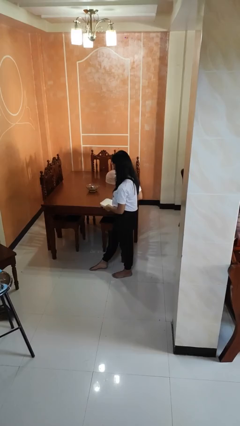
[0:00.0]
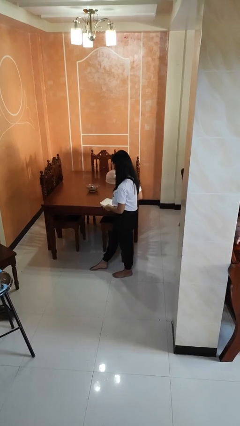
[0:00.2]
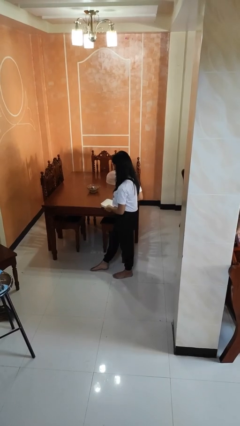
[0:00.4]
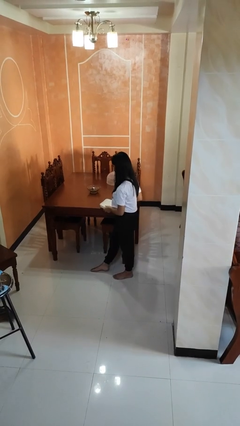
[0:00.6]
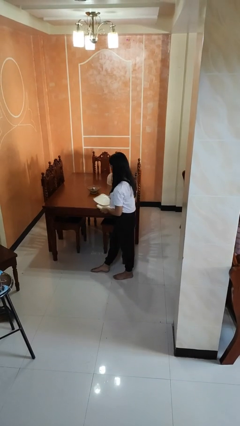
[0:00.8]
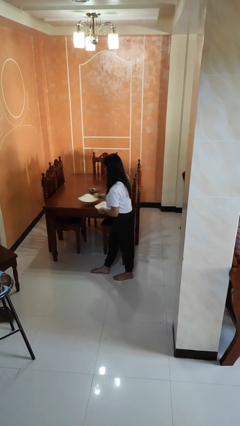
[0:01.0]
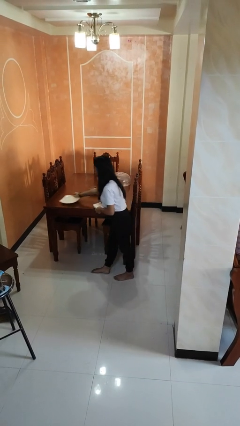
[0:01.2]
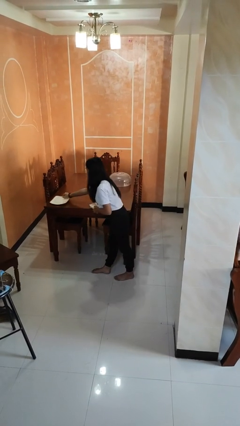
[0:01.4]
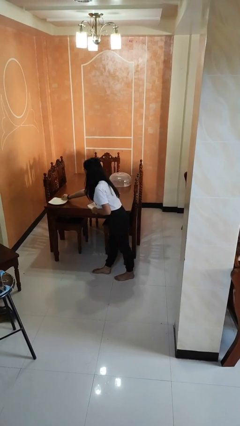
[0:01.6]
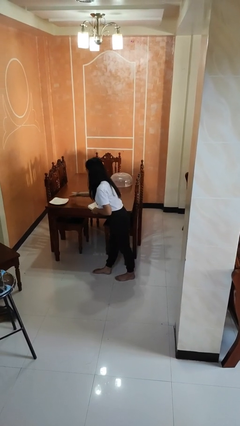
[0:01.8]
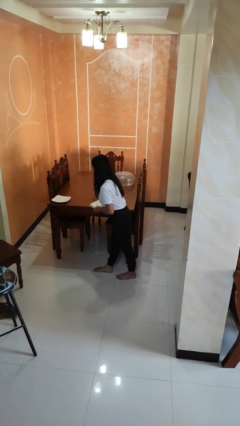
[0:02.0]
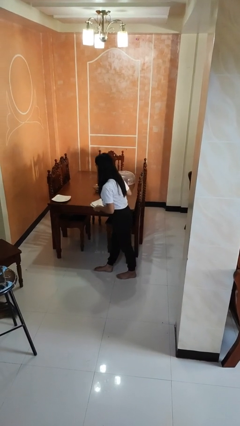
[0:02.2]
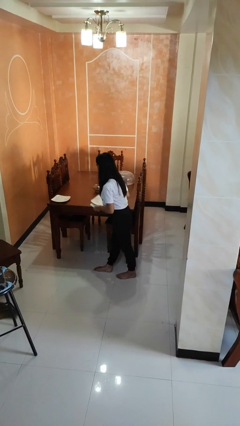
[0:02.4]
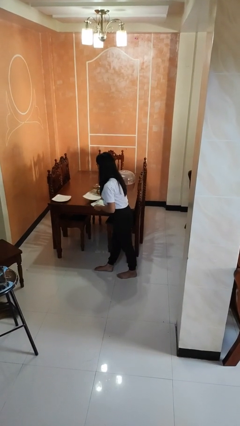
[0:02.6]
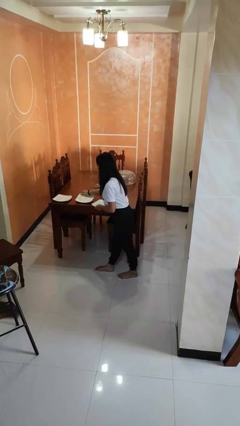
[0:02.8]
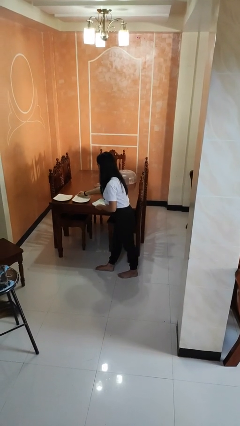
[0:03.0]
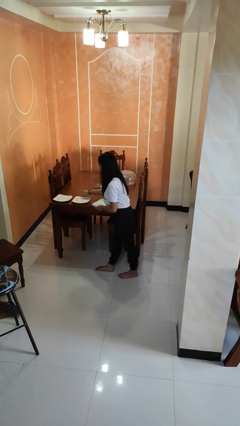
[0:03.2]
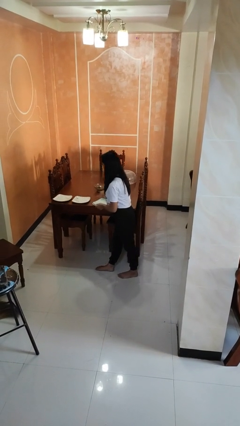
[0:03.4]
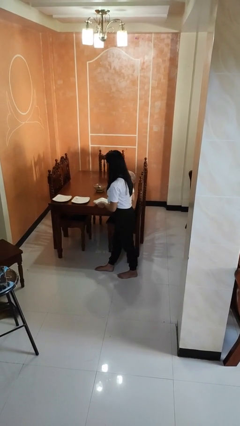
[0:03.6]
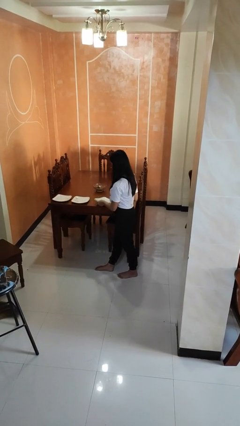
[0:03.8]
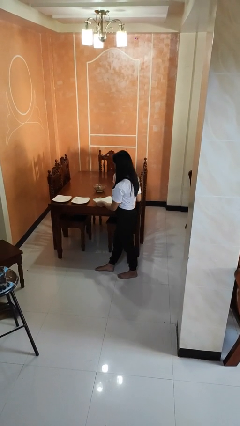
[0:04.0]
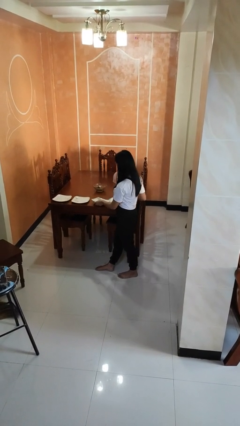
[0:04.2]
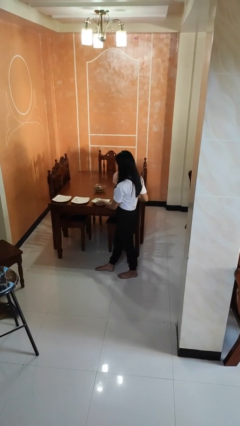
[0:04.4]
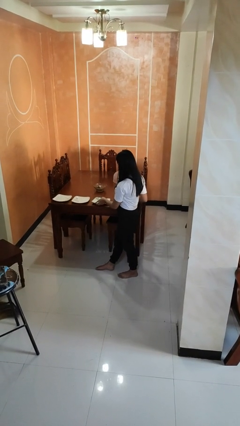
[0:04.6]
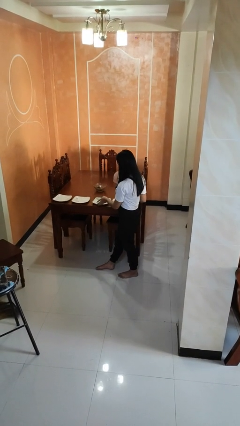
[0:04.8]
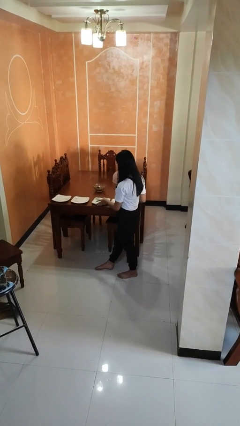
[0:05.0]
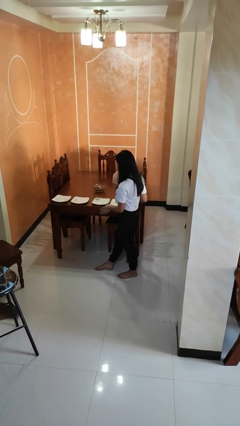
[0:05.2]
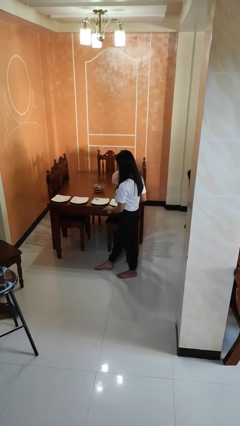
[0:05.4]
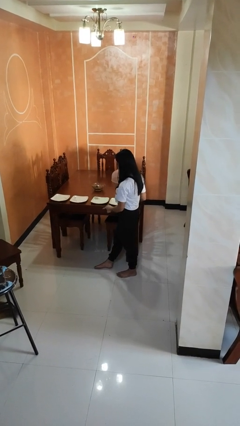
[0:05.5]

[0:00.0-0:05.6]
person sets table

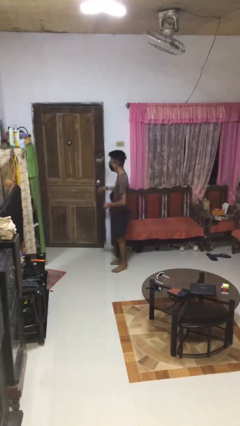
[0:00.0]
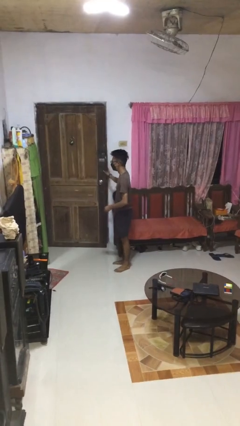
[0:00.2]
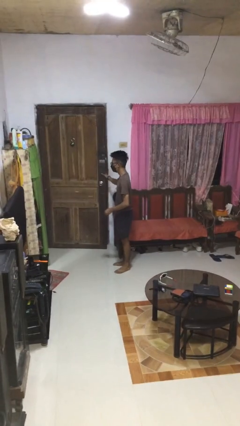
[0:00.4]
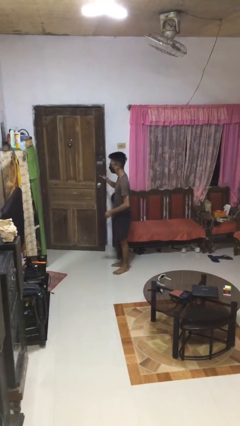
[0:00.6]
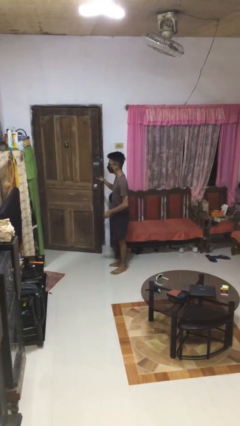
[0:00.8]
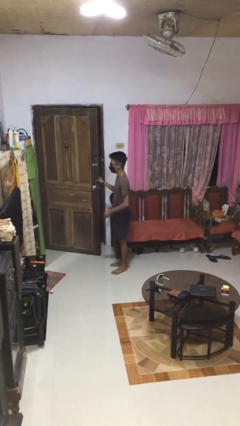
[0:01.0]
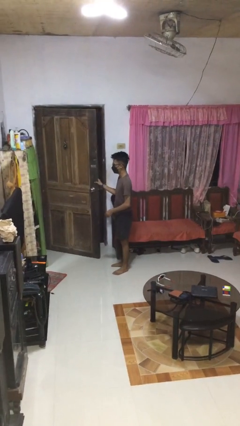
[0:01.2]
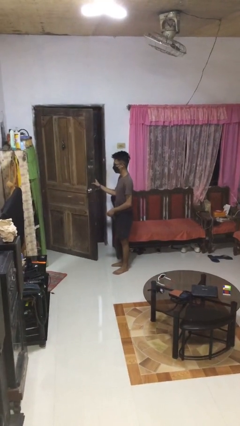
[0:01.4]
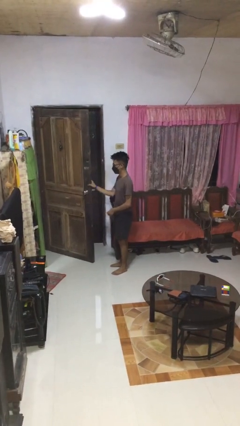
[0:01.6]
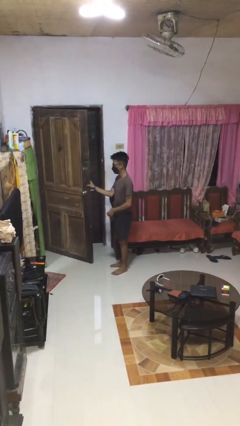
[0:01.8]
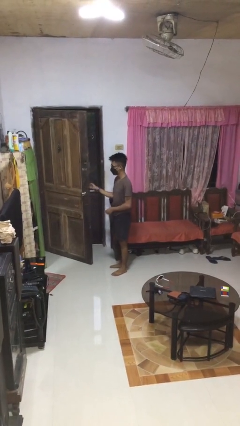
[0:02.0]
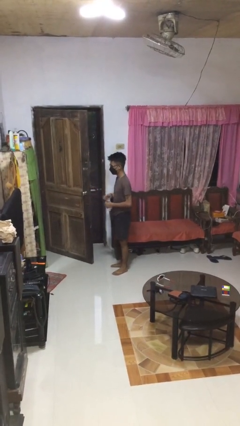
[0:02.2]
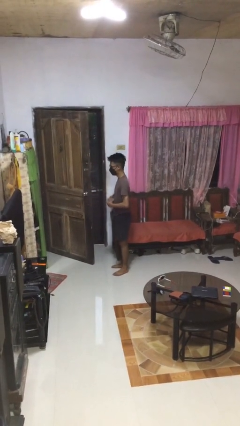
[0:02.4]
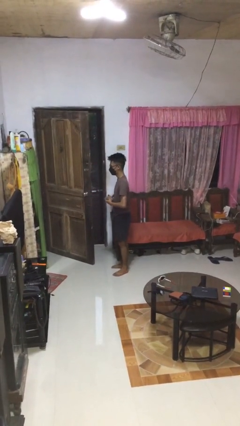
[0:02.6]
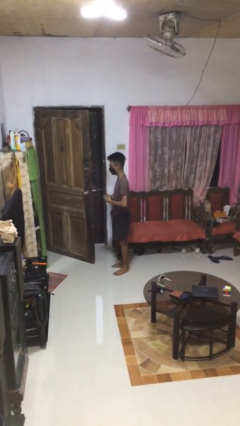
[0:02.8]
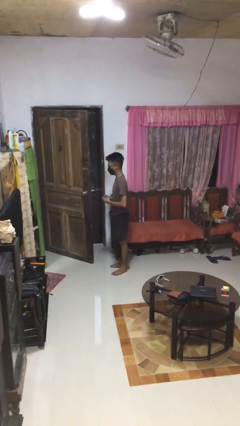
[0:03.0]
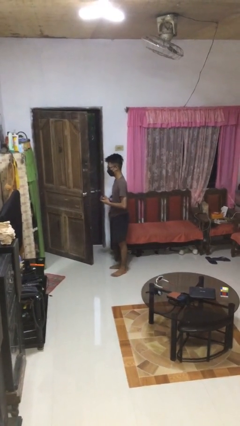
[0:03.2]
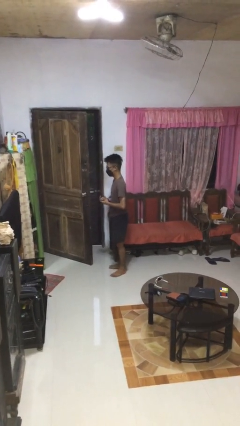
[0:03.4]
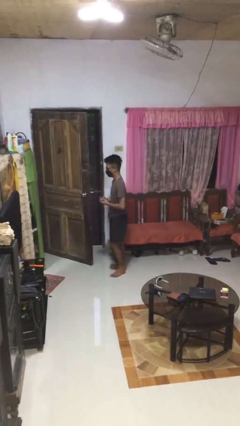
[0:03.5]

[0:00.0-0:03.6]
person opens facility door

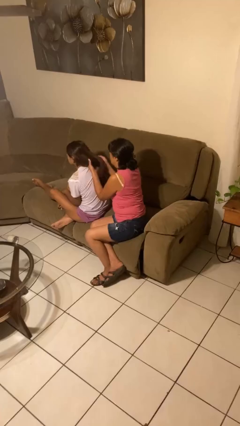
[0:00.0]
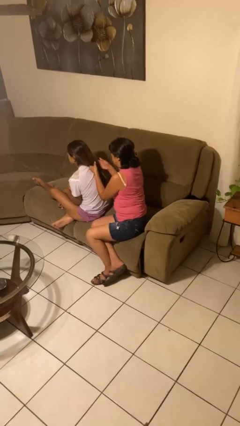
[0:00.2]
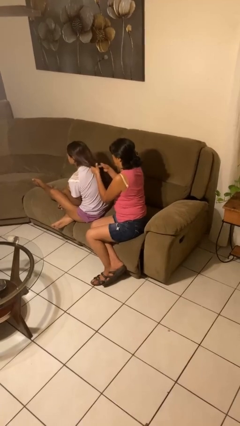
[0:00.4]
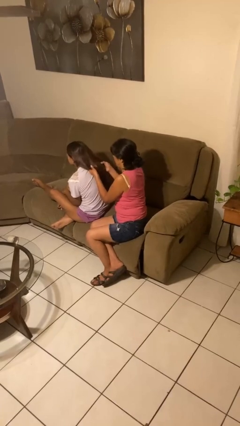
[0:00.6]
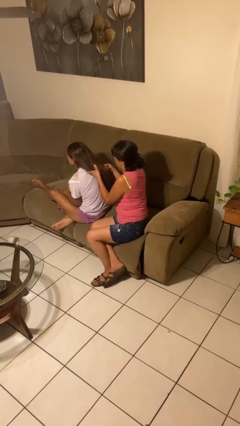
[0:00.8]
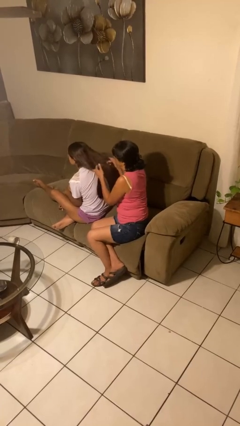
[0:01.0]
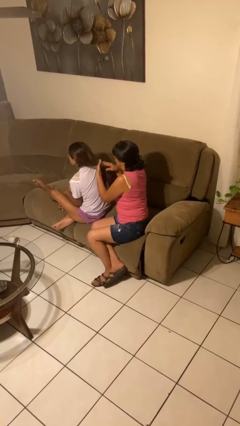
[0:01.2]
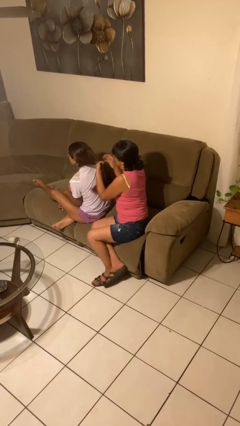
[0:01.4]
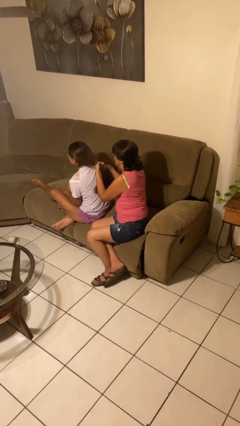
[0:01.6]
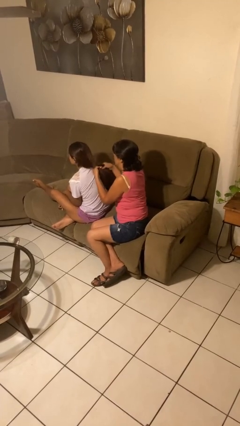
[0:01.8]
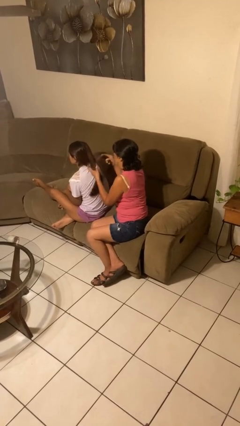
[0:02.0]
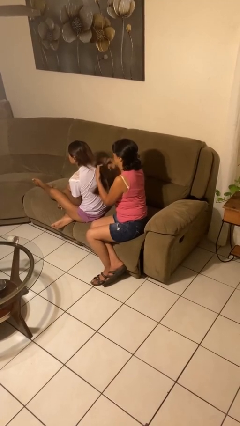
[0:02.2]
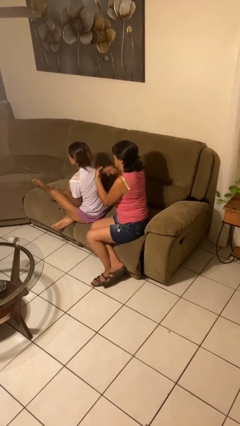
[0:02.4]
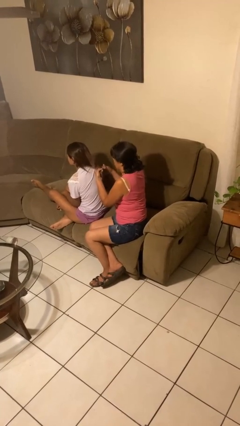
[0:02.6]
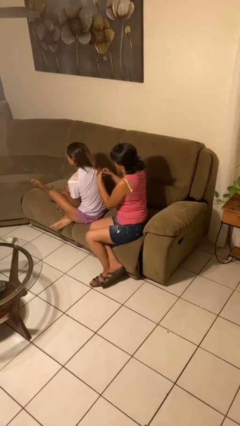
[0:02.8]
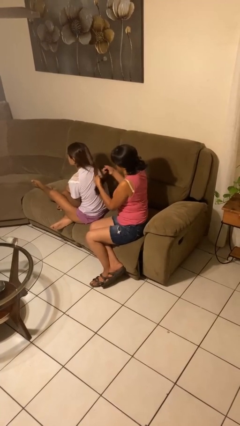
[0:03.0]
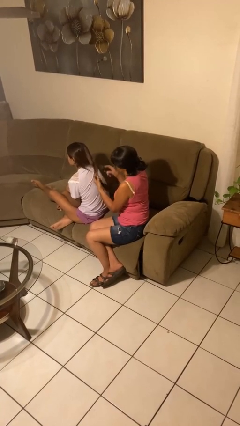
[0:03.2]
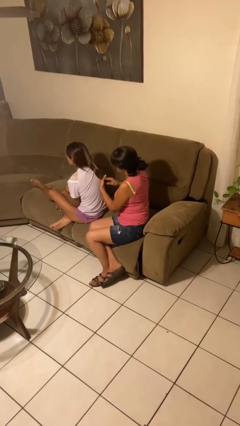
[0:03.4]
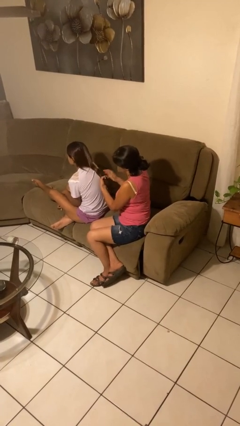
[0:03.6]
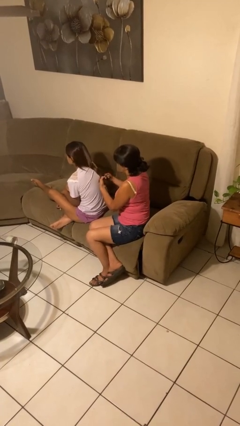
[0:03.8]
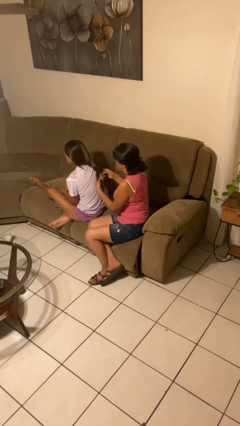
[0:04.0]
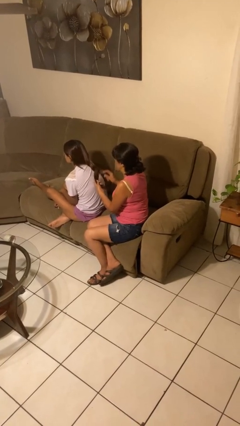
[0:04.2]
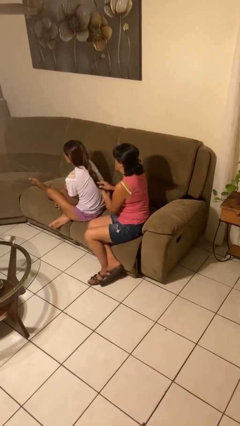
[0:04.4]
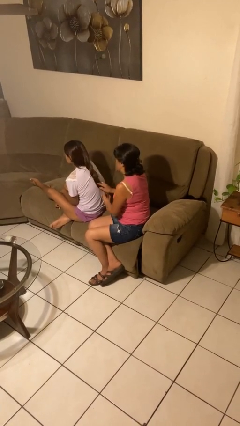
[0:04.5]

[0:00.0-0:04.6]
person braids hair of person

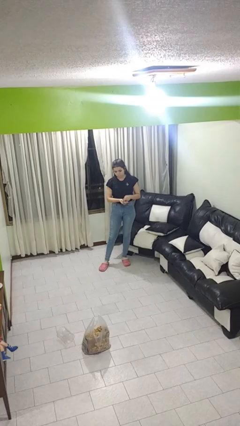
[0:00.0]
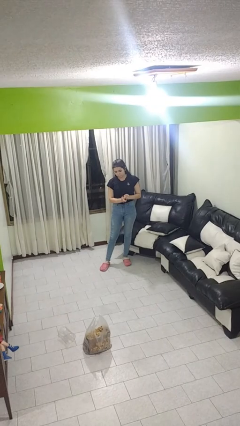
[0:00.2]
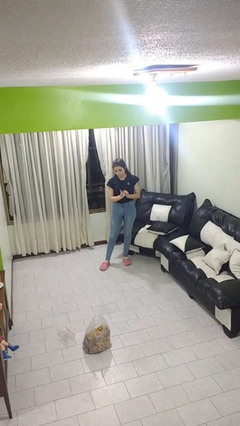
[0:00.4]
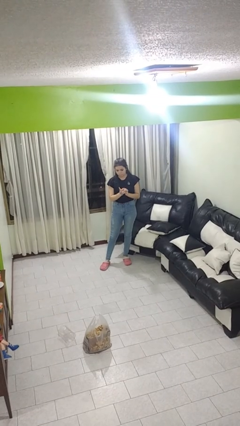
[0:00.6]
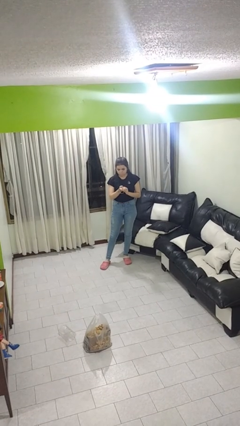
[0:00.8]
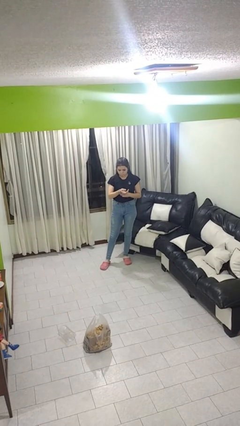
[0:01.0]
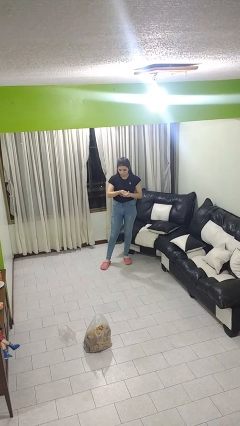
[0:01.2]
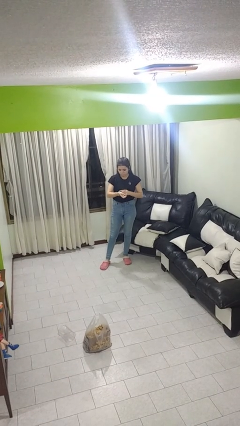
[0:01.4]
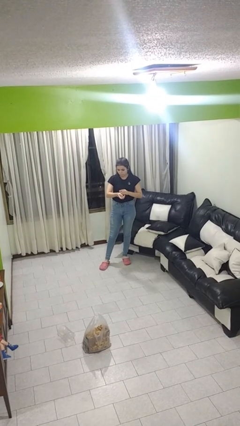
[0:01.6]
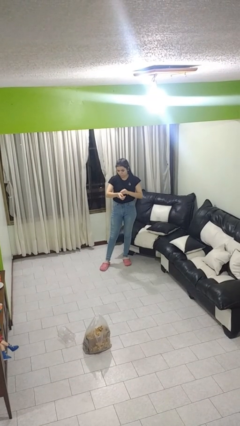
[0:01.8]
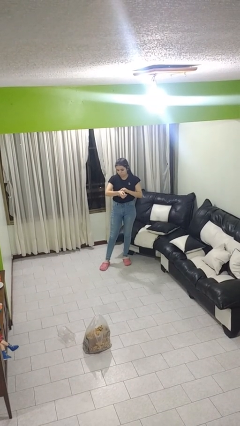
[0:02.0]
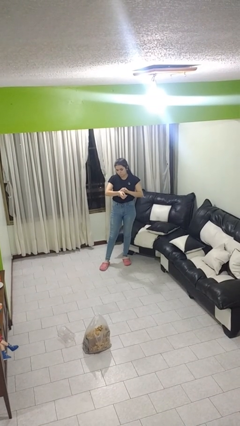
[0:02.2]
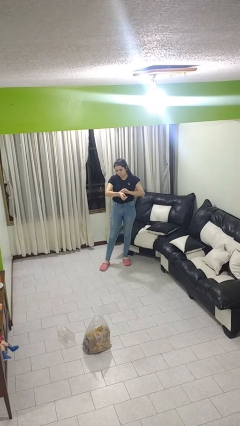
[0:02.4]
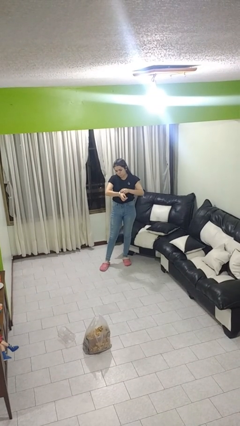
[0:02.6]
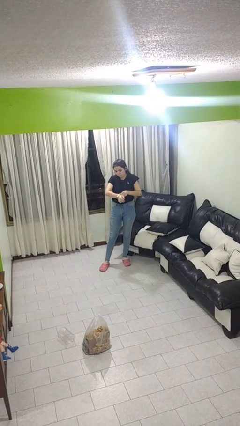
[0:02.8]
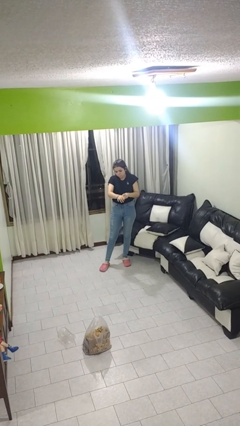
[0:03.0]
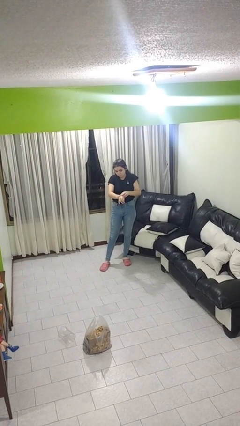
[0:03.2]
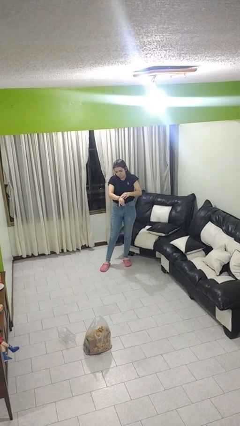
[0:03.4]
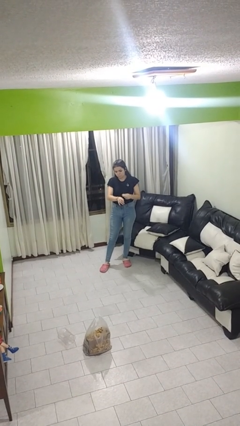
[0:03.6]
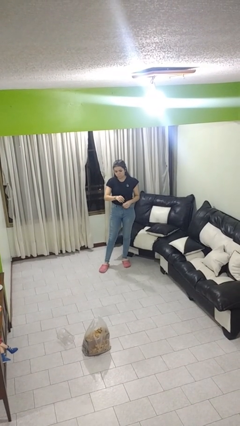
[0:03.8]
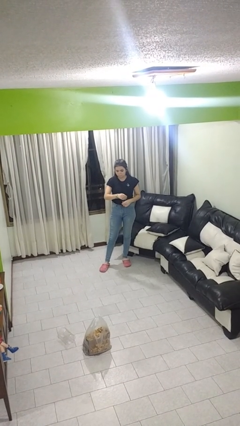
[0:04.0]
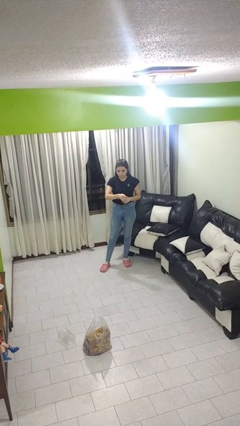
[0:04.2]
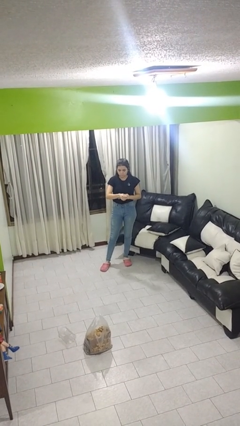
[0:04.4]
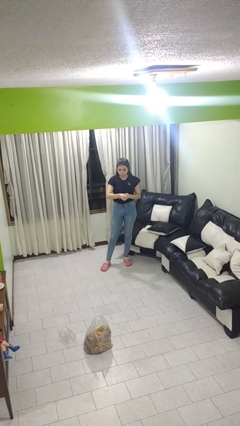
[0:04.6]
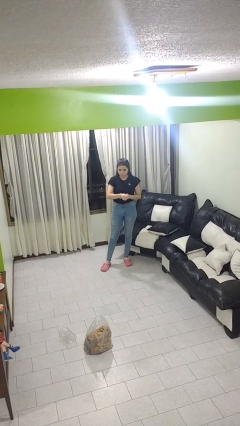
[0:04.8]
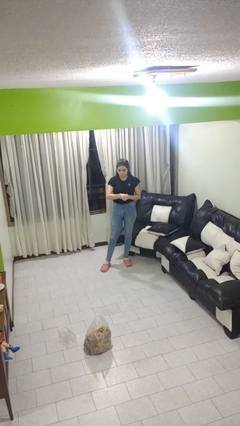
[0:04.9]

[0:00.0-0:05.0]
person puts on wristwatch
